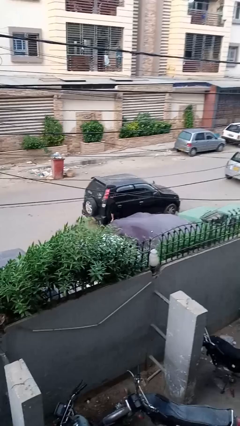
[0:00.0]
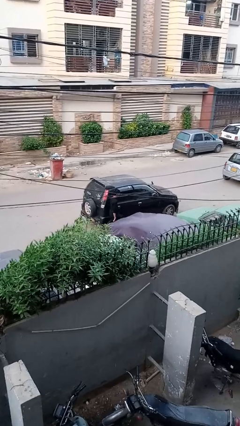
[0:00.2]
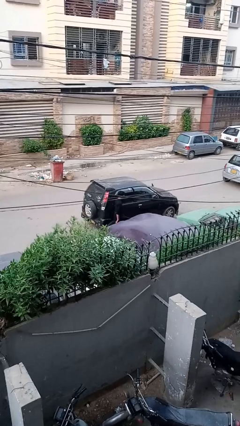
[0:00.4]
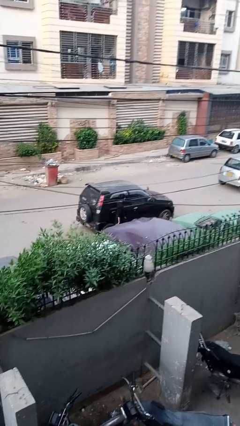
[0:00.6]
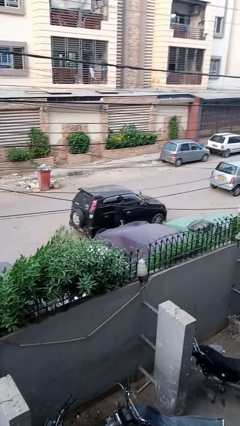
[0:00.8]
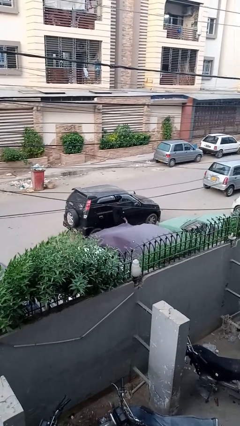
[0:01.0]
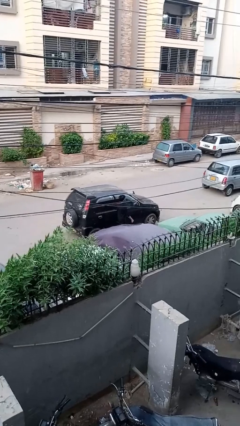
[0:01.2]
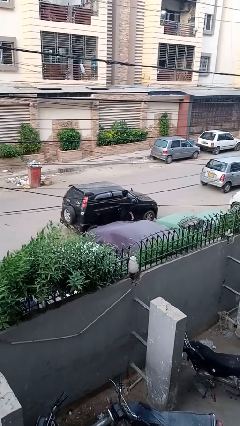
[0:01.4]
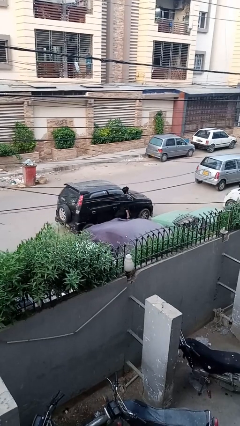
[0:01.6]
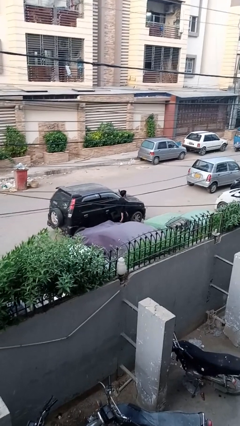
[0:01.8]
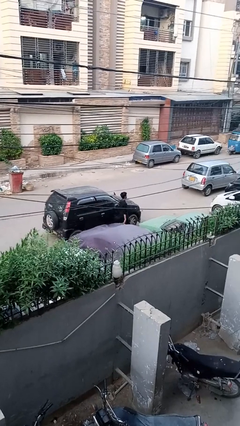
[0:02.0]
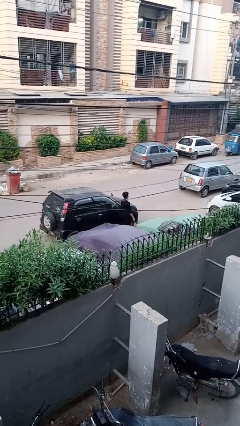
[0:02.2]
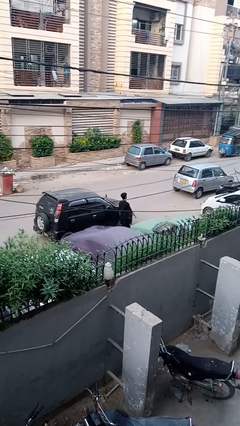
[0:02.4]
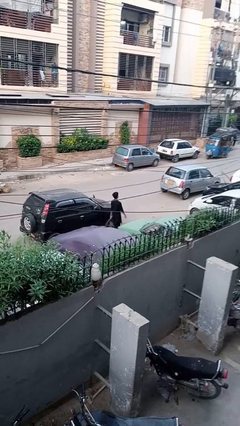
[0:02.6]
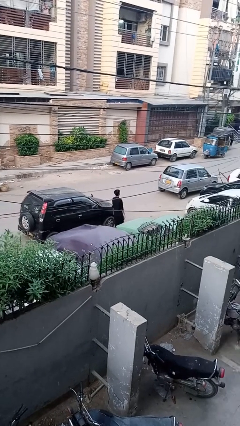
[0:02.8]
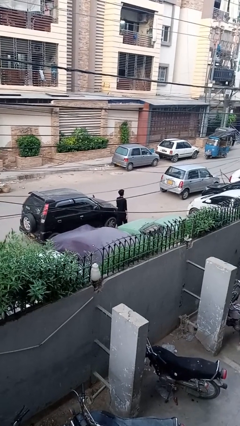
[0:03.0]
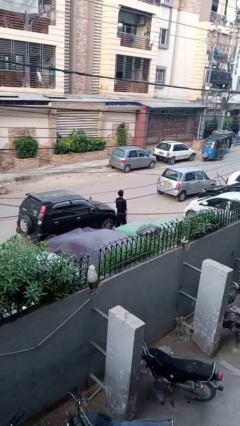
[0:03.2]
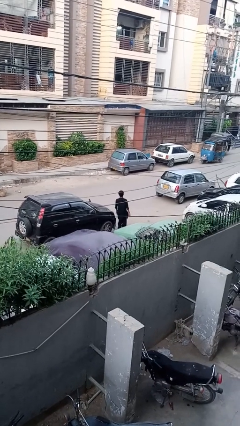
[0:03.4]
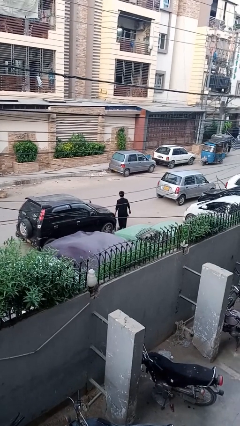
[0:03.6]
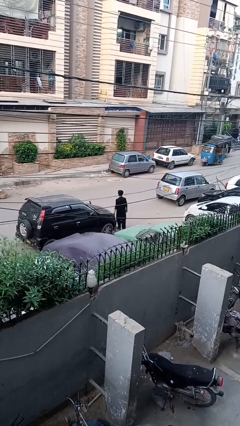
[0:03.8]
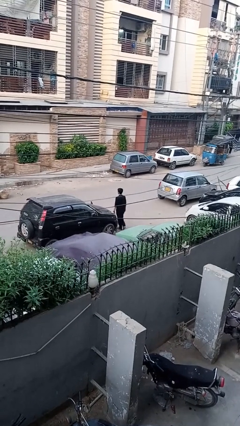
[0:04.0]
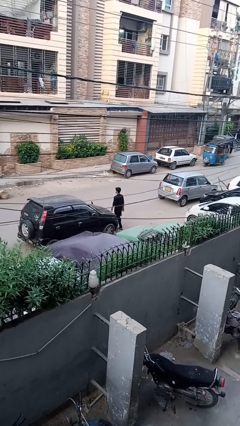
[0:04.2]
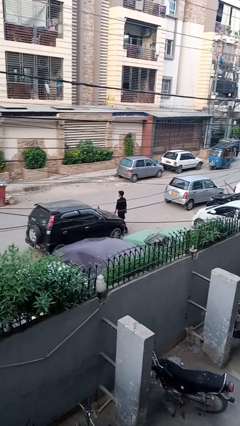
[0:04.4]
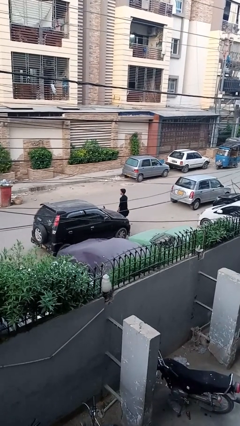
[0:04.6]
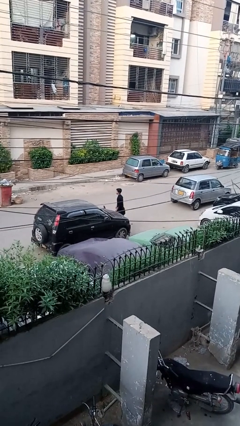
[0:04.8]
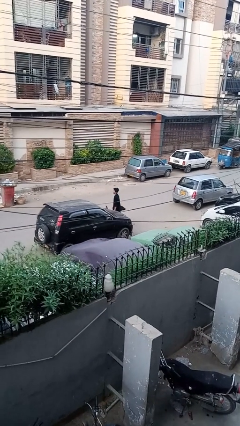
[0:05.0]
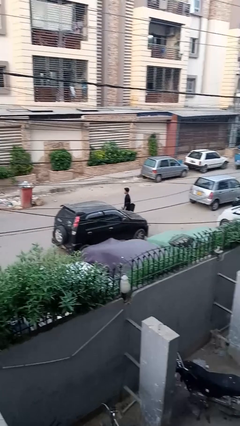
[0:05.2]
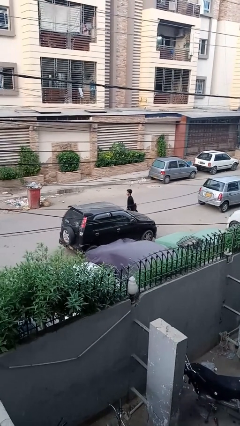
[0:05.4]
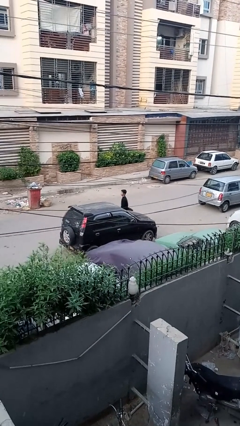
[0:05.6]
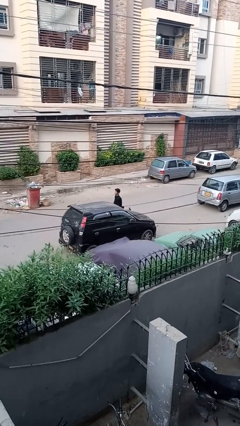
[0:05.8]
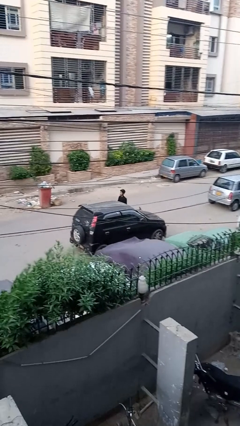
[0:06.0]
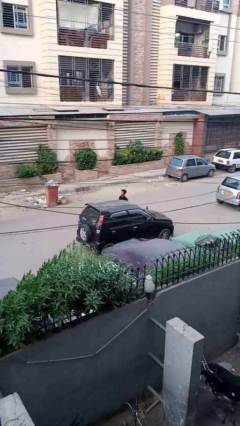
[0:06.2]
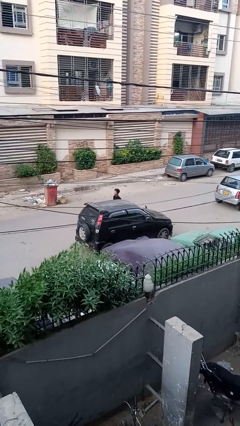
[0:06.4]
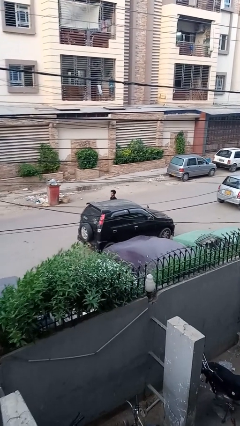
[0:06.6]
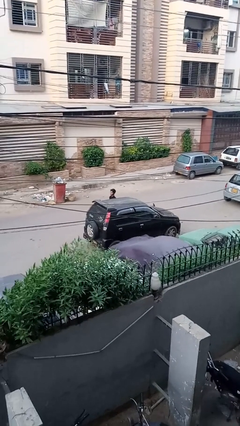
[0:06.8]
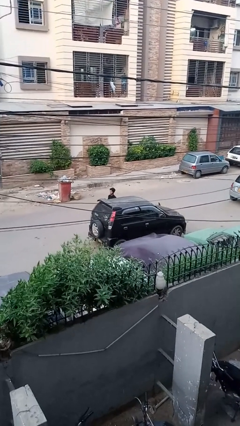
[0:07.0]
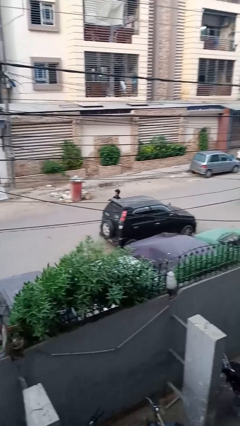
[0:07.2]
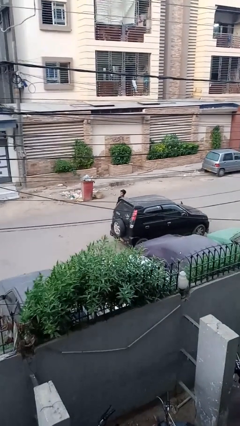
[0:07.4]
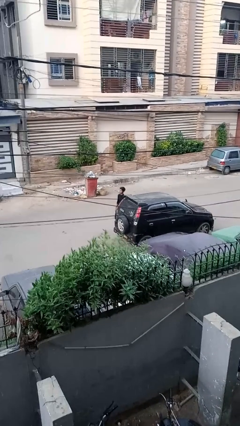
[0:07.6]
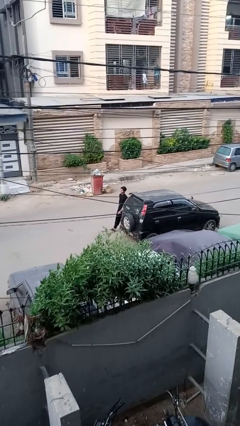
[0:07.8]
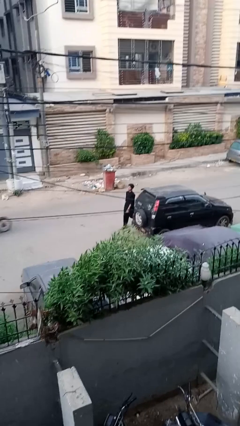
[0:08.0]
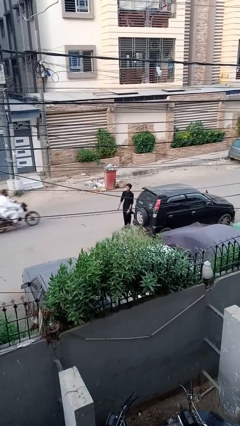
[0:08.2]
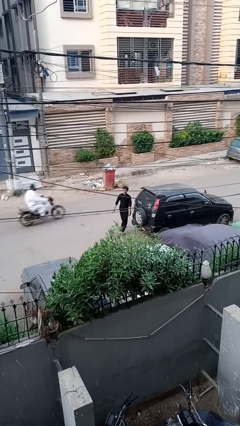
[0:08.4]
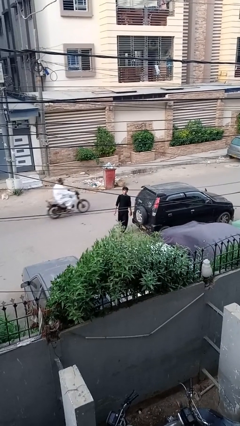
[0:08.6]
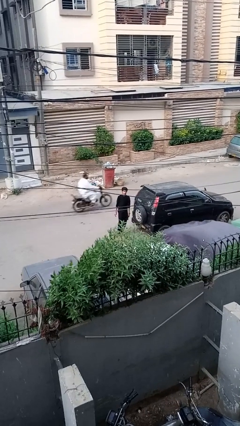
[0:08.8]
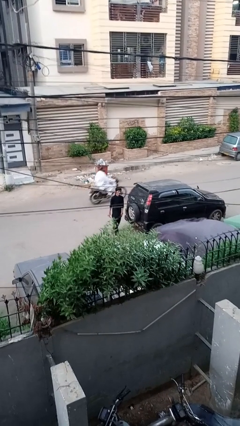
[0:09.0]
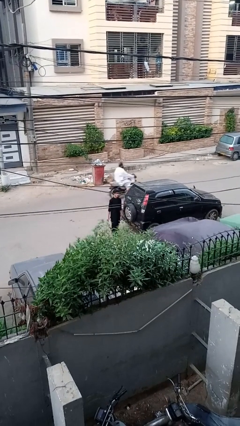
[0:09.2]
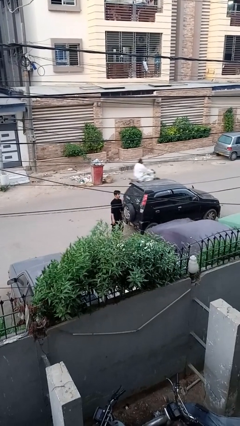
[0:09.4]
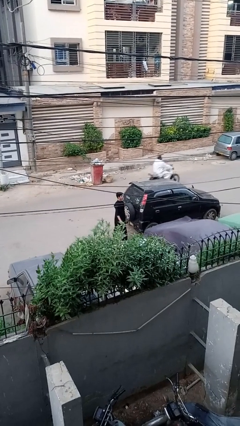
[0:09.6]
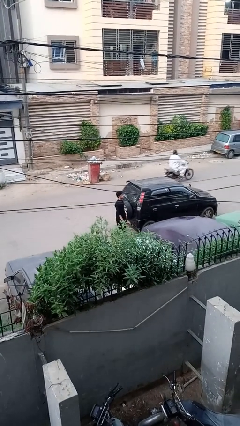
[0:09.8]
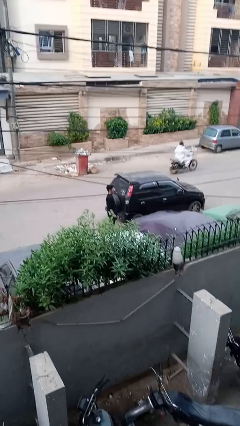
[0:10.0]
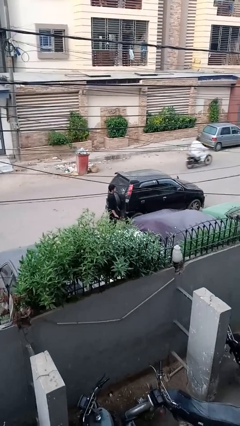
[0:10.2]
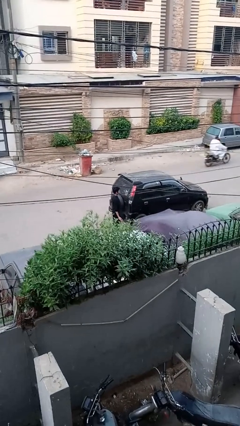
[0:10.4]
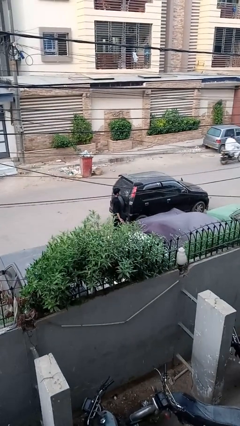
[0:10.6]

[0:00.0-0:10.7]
person walks around car

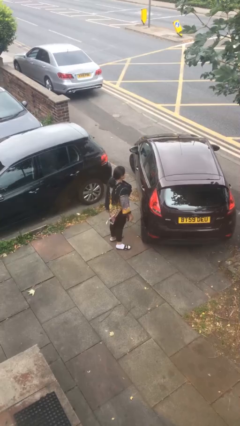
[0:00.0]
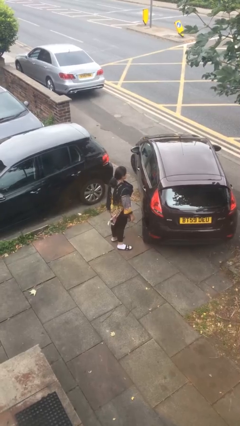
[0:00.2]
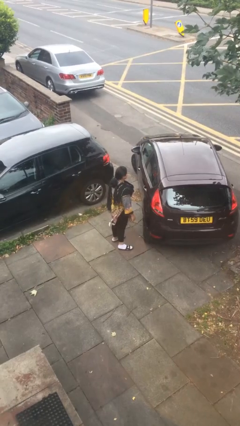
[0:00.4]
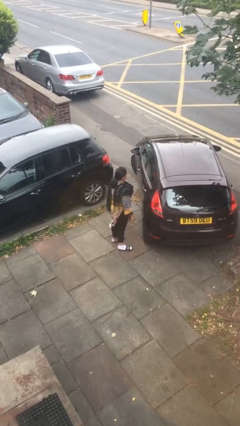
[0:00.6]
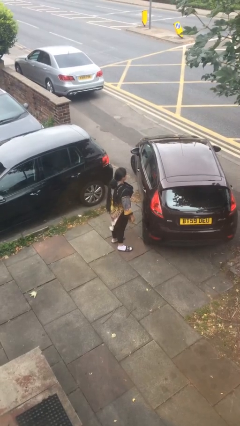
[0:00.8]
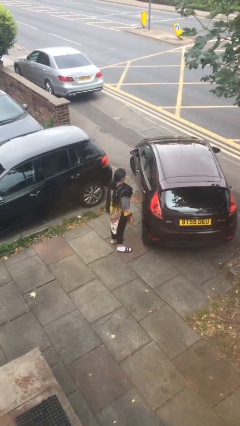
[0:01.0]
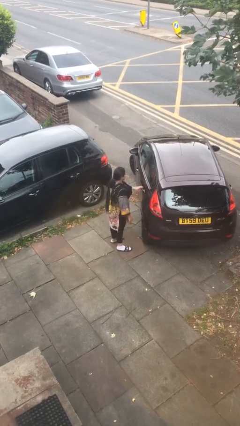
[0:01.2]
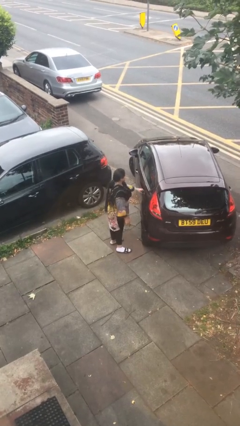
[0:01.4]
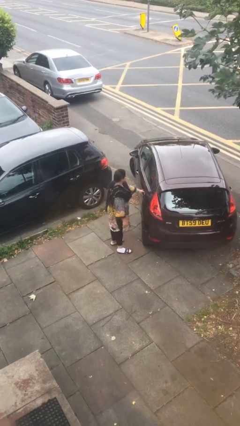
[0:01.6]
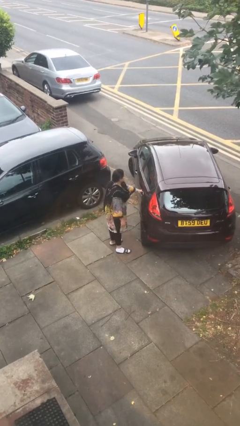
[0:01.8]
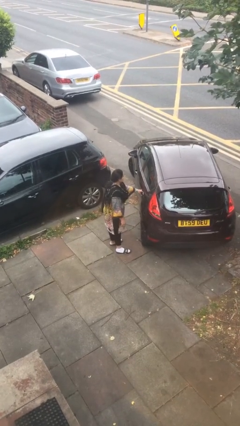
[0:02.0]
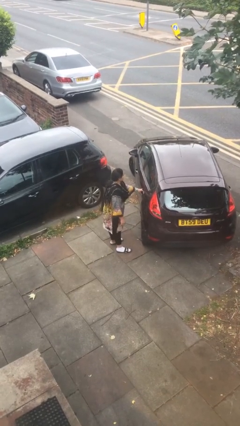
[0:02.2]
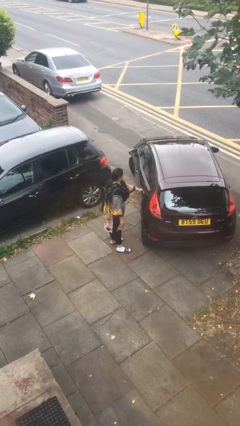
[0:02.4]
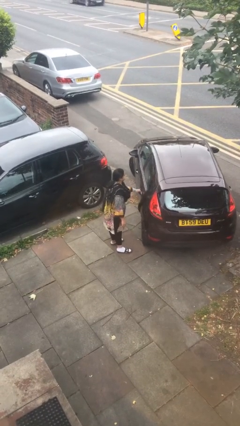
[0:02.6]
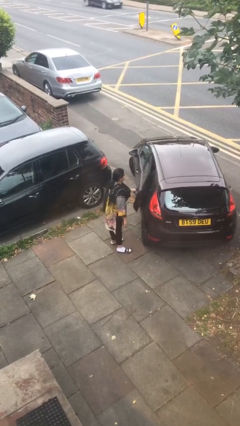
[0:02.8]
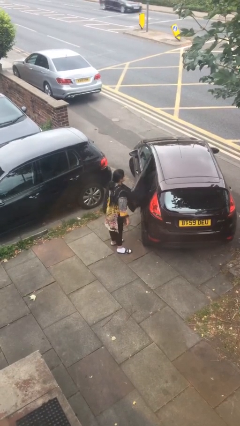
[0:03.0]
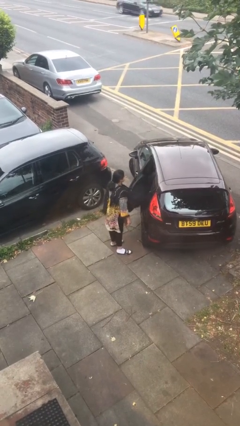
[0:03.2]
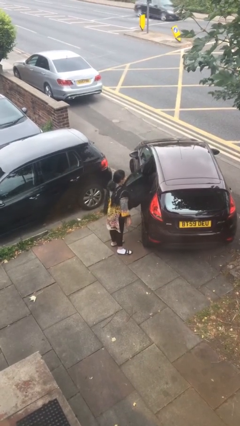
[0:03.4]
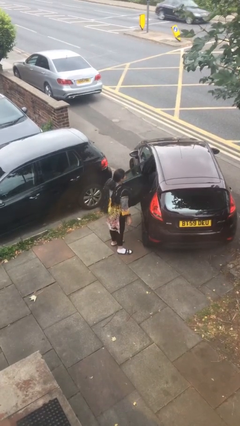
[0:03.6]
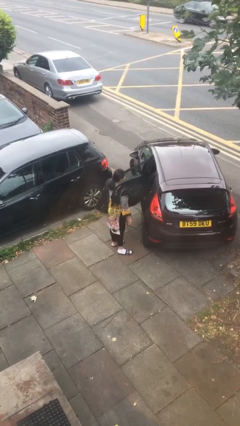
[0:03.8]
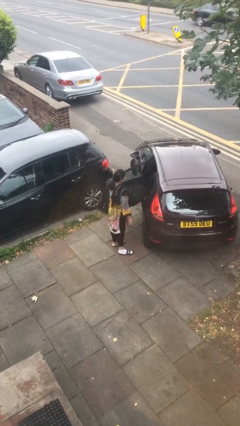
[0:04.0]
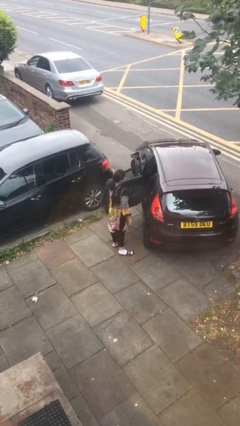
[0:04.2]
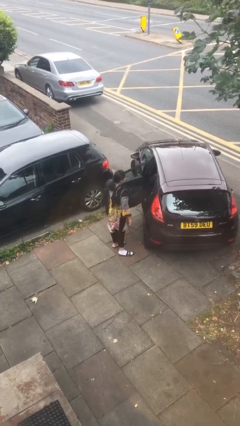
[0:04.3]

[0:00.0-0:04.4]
person opens car door

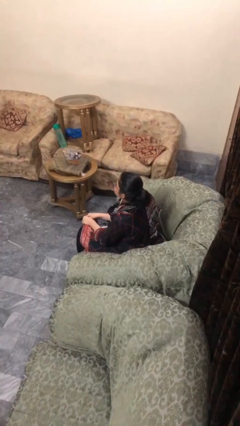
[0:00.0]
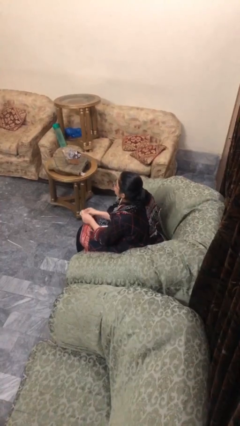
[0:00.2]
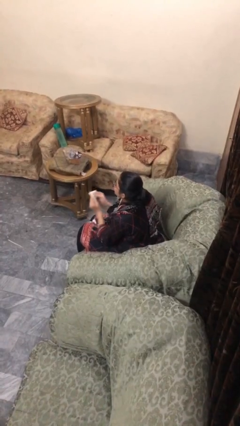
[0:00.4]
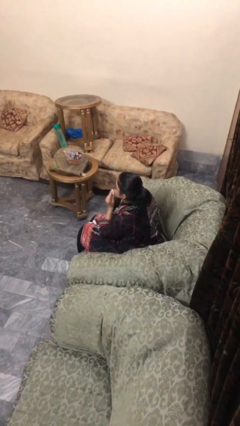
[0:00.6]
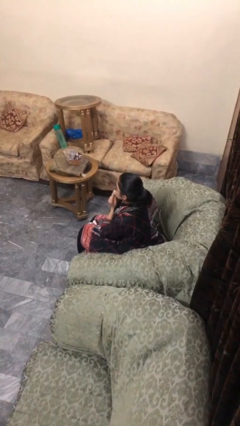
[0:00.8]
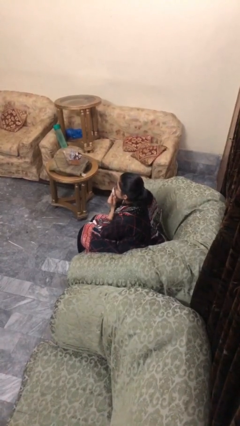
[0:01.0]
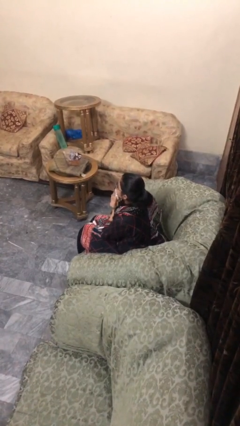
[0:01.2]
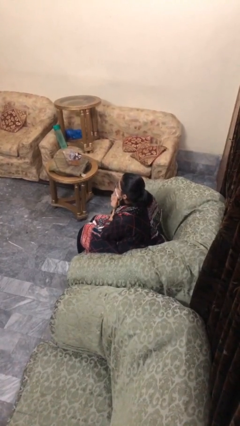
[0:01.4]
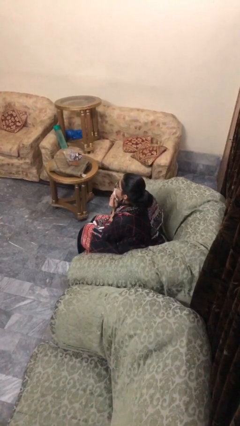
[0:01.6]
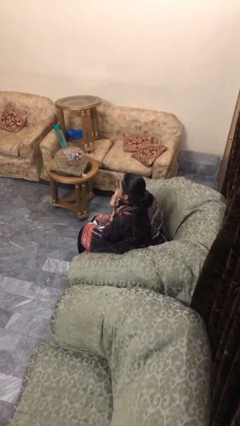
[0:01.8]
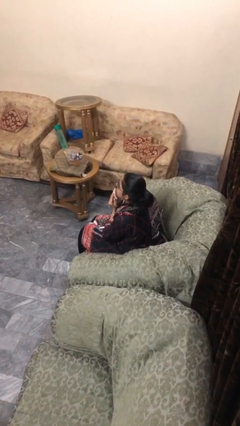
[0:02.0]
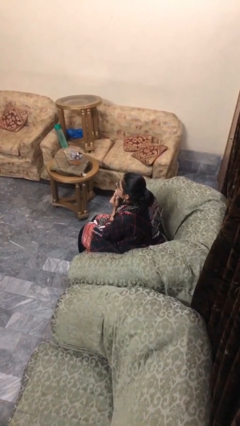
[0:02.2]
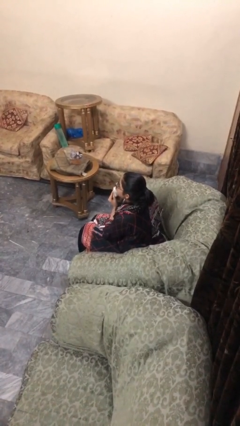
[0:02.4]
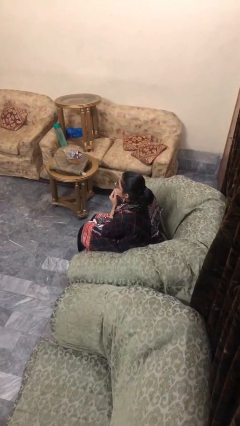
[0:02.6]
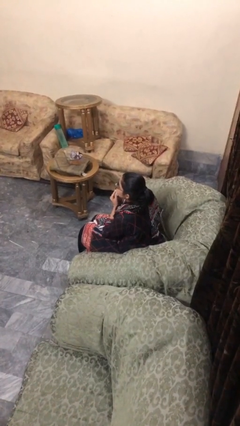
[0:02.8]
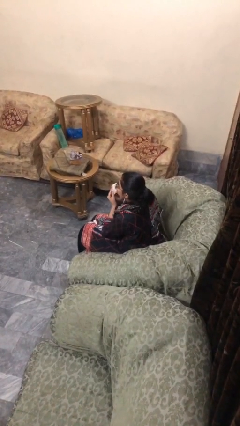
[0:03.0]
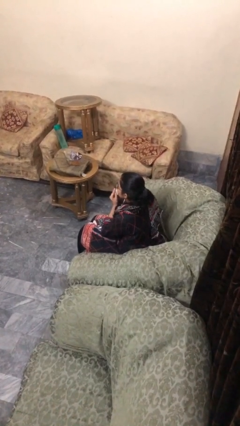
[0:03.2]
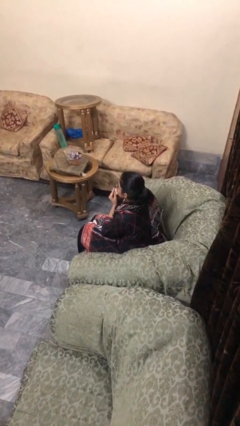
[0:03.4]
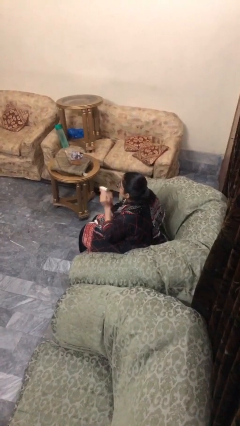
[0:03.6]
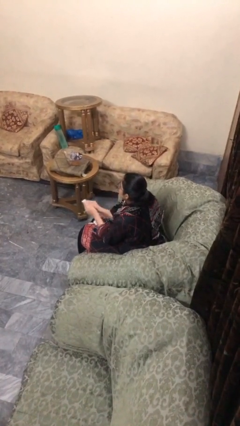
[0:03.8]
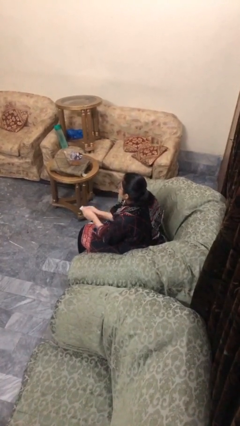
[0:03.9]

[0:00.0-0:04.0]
person wipes mouth with napkin
